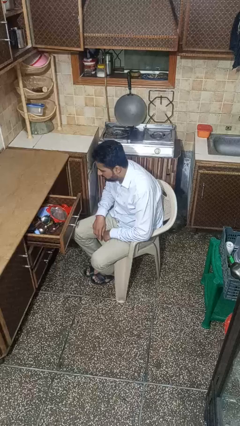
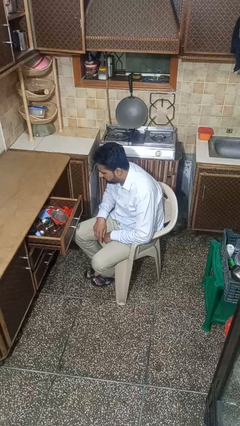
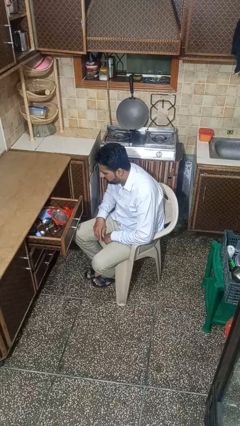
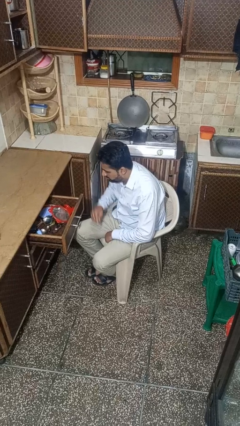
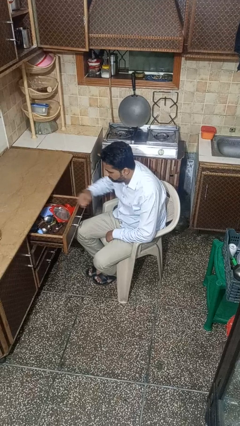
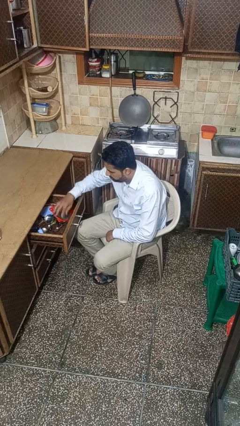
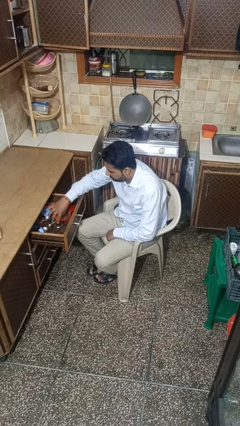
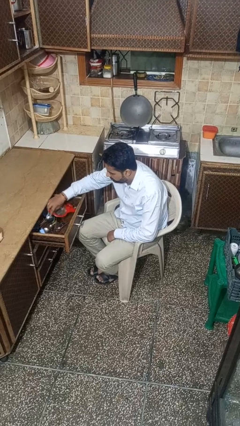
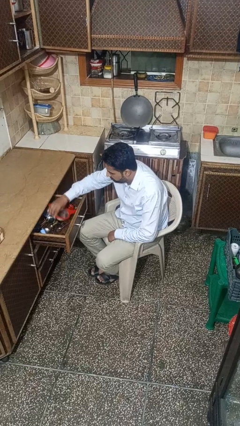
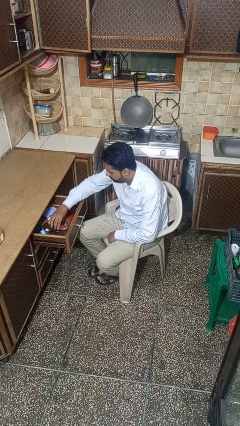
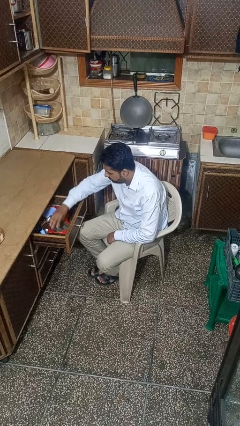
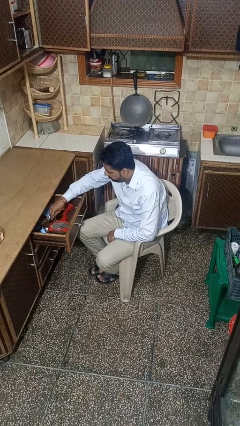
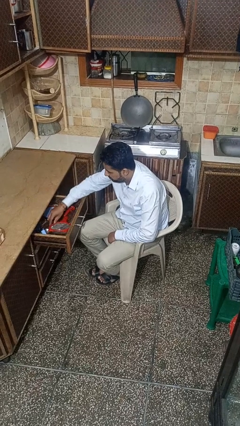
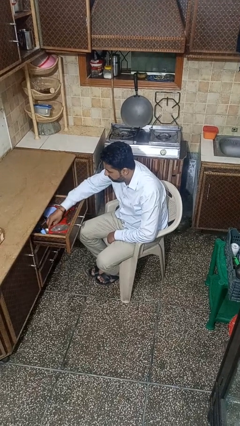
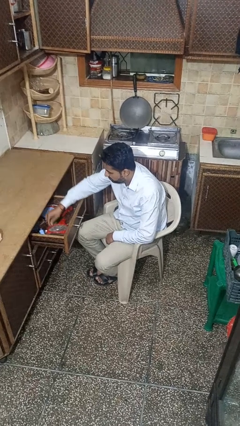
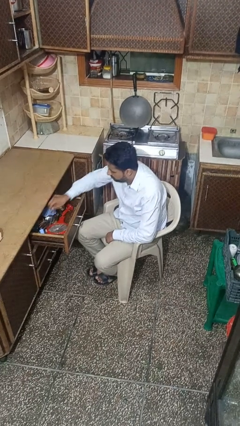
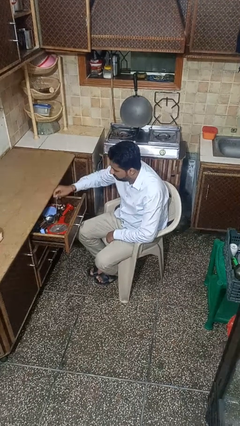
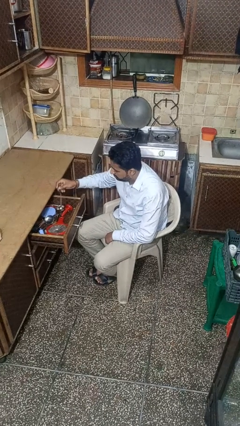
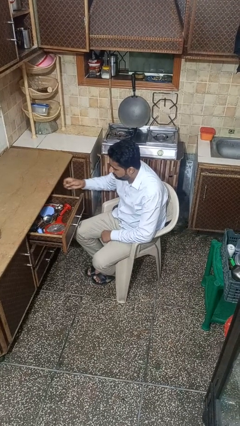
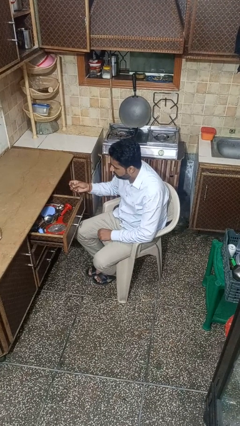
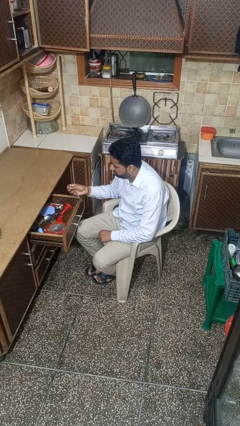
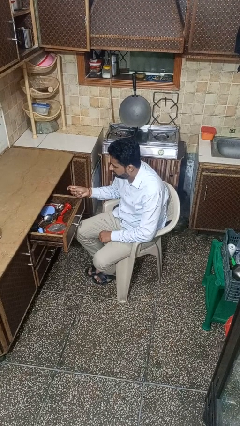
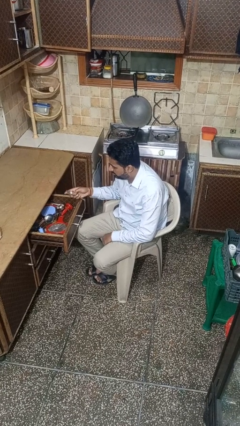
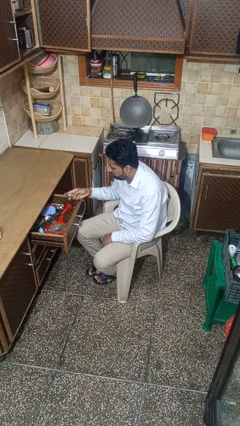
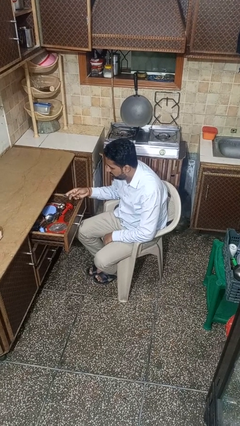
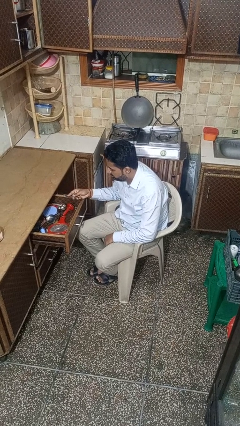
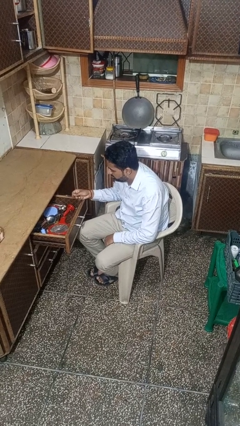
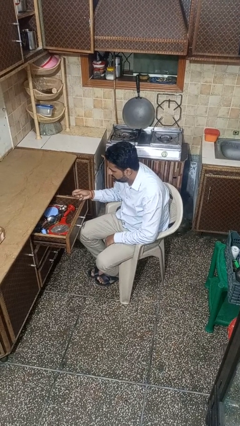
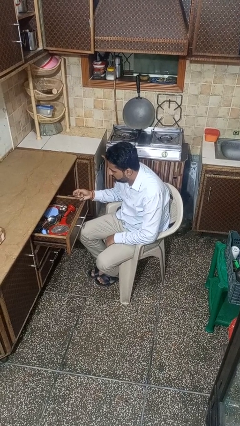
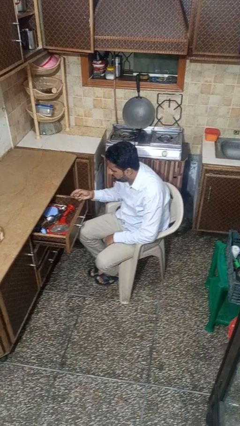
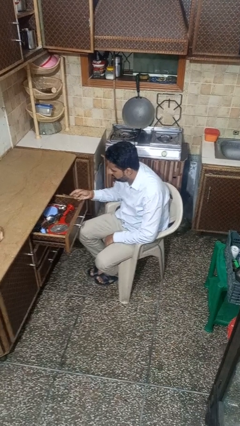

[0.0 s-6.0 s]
person takes object from kitchen drawer

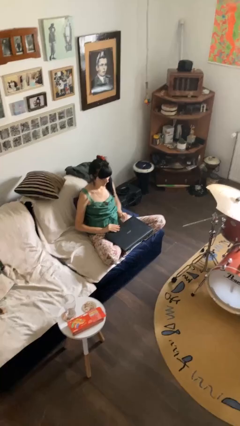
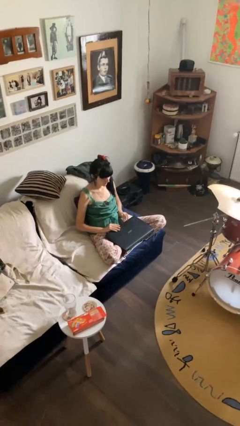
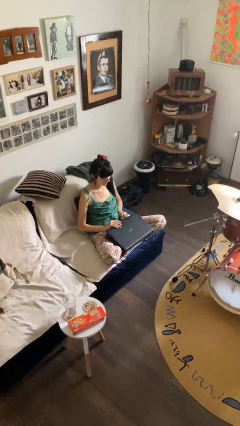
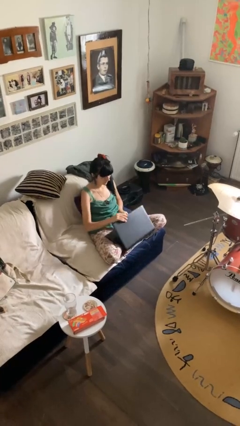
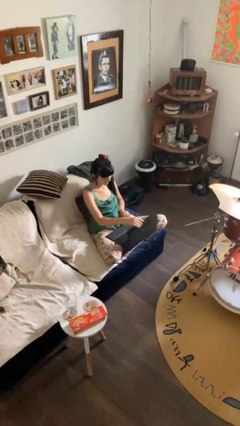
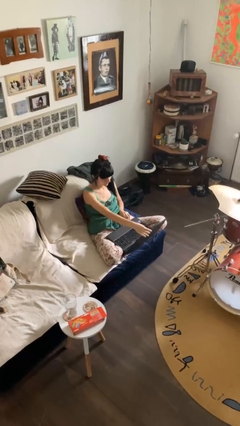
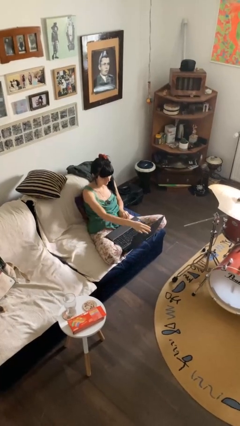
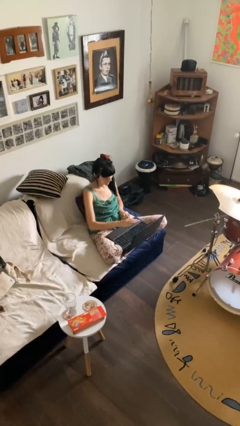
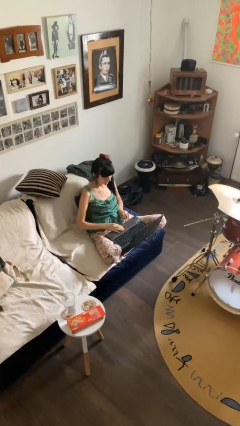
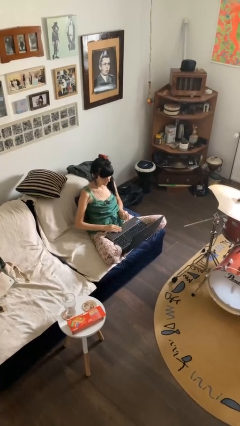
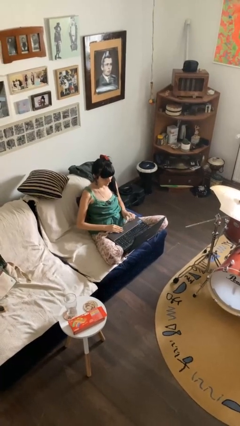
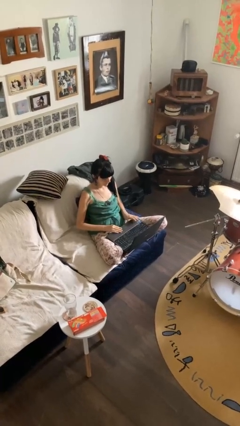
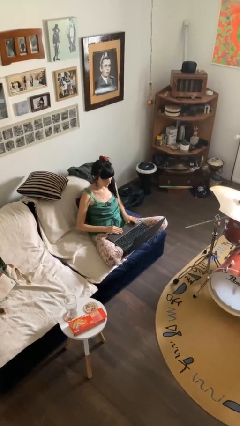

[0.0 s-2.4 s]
person opens laptop

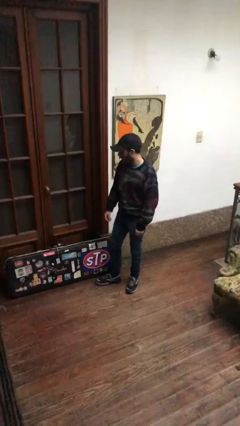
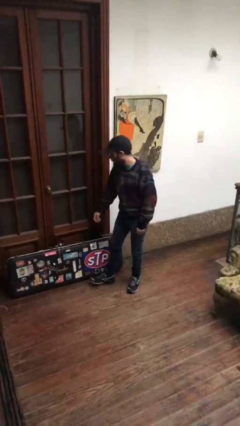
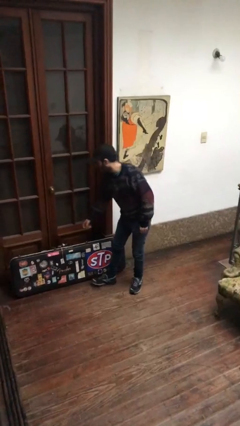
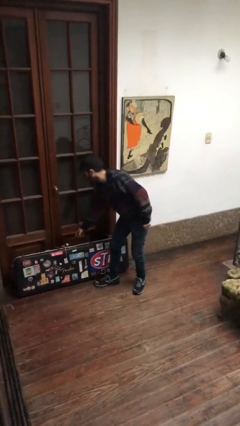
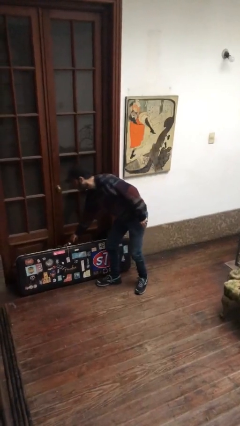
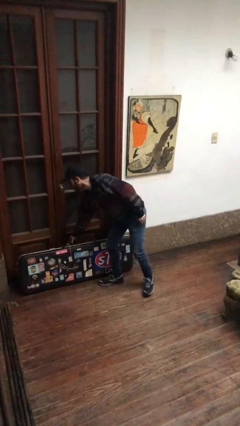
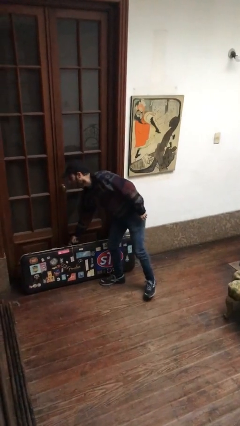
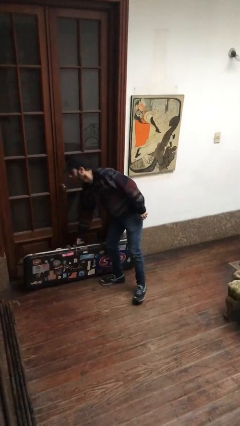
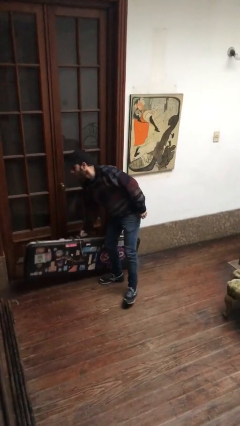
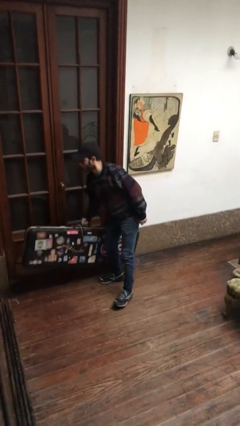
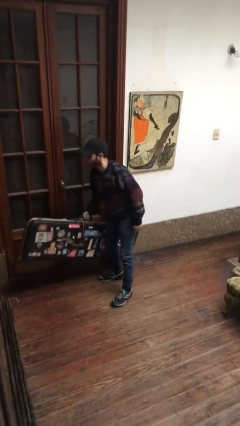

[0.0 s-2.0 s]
person picks up object from floor

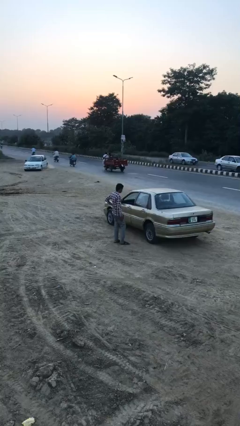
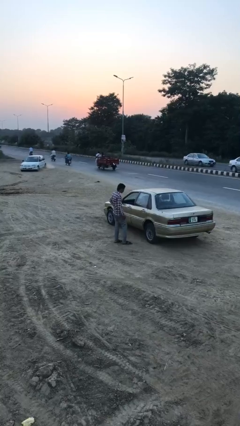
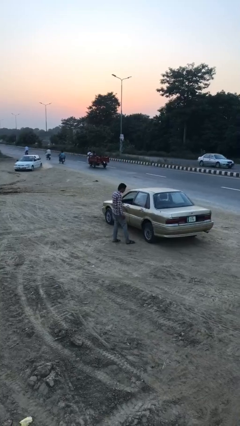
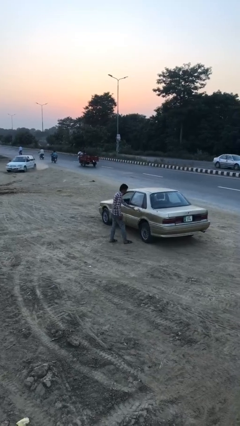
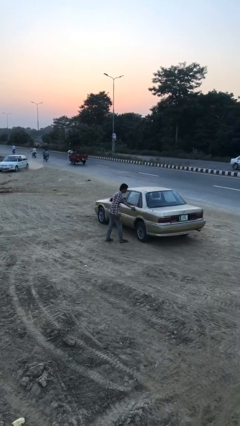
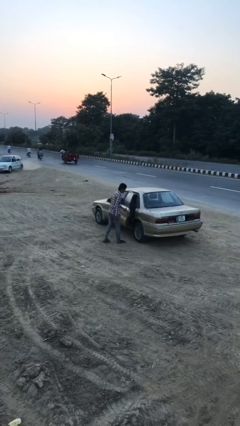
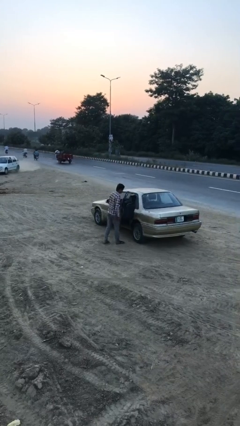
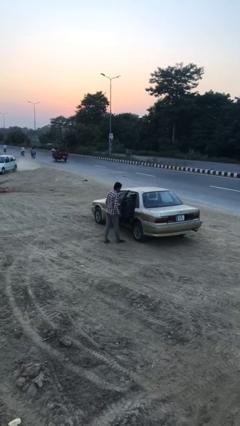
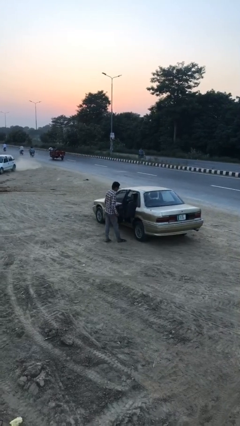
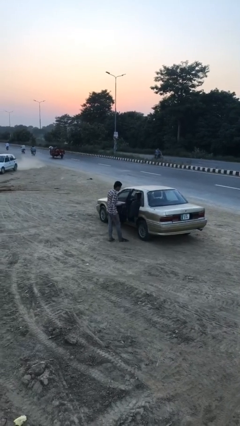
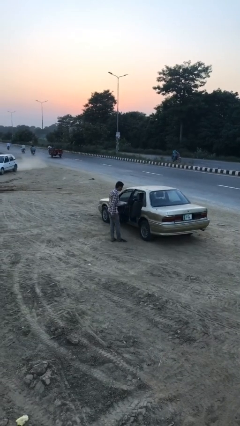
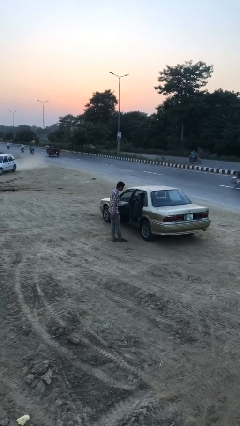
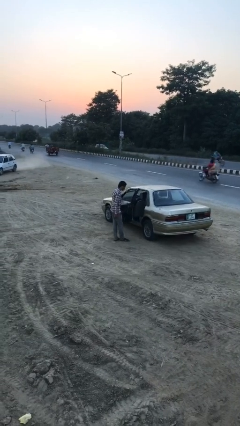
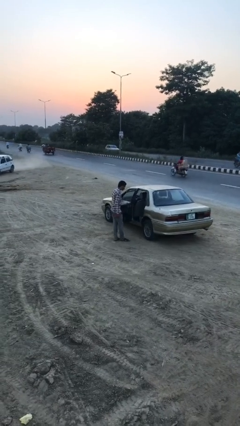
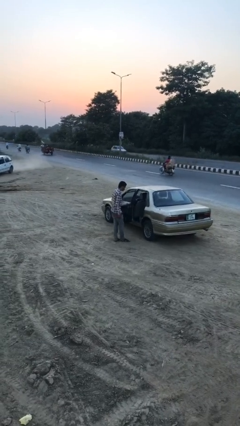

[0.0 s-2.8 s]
person opens car door

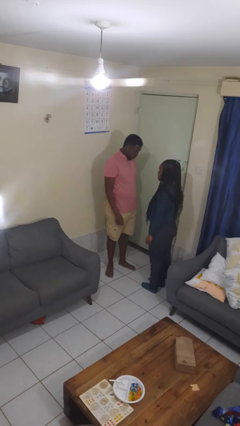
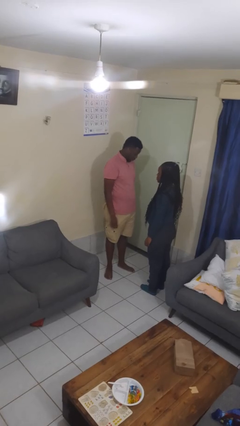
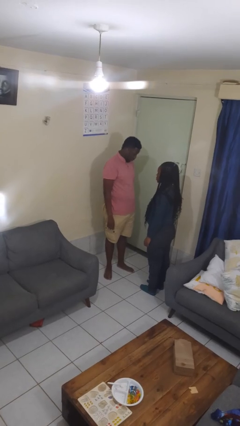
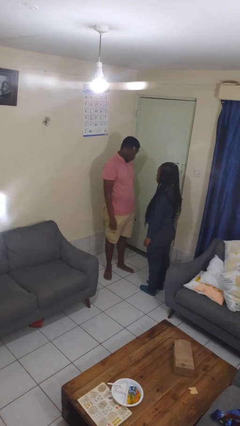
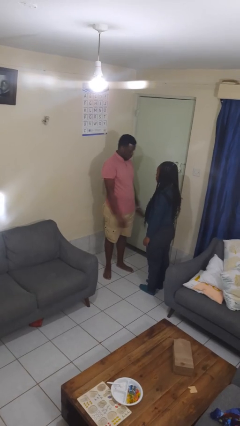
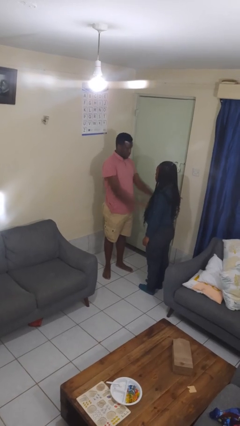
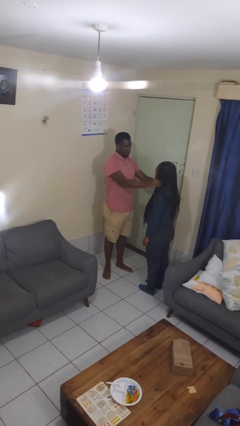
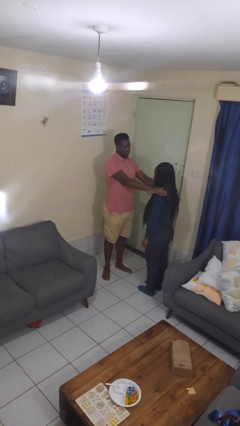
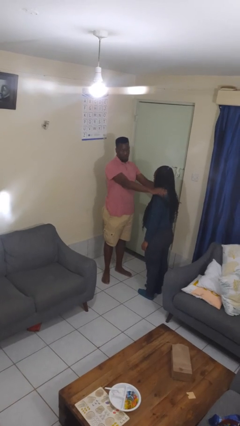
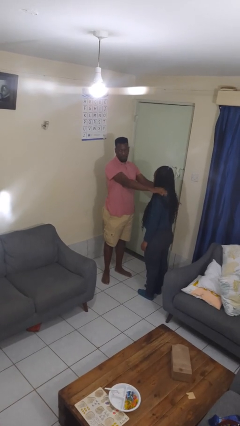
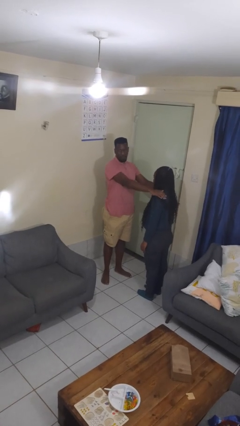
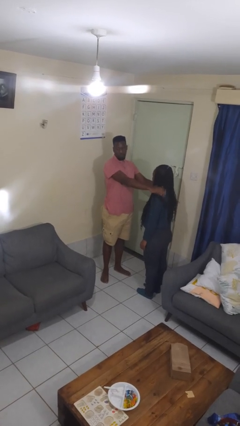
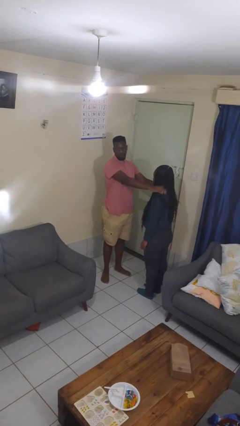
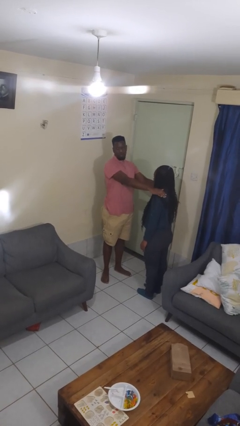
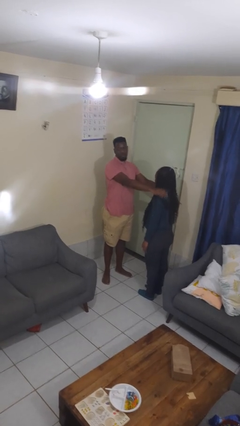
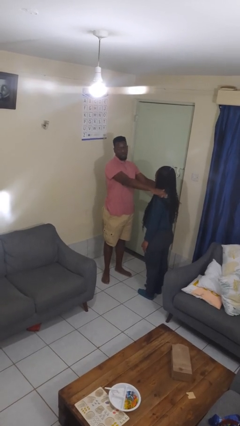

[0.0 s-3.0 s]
person pounds shoulders of person

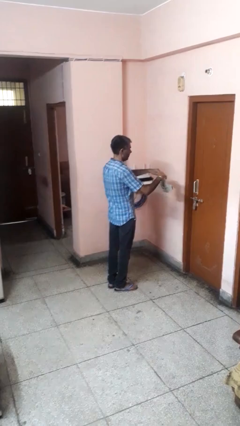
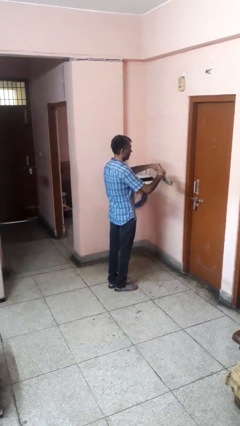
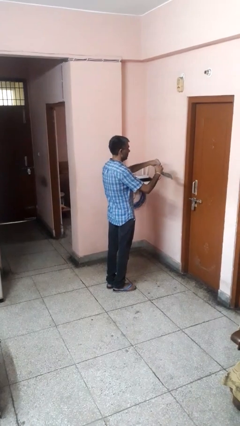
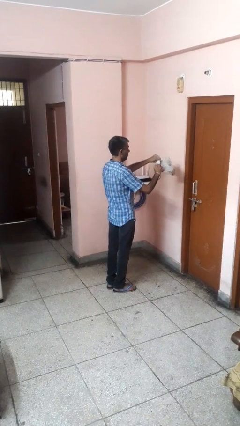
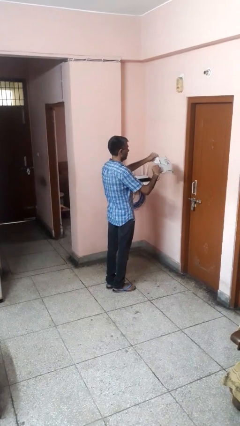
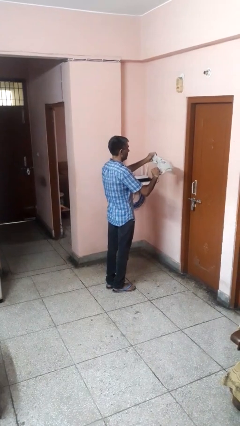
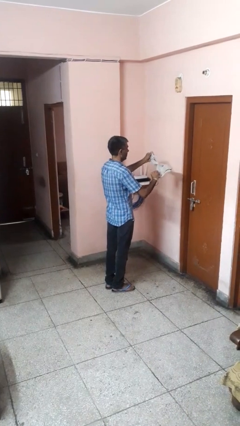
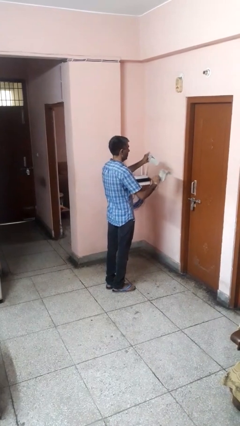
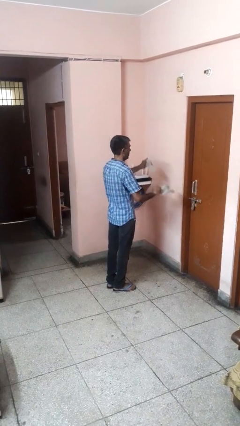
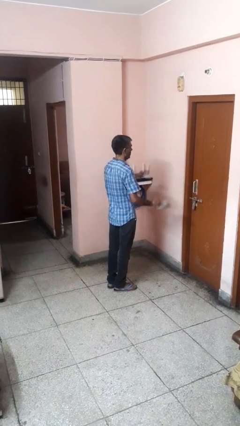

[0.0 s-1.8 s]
person tears paper
